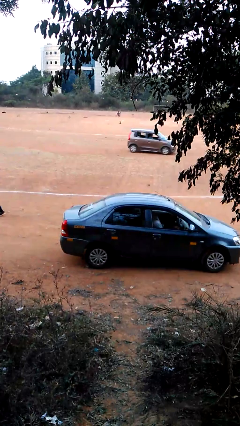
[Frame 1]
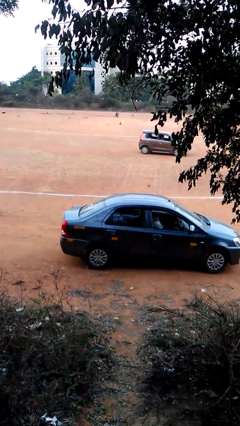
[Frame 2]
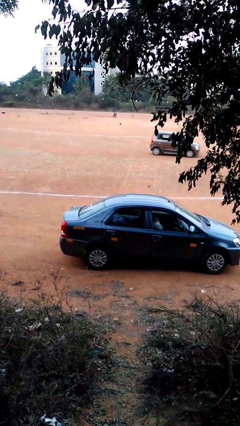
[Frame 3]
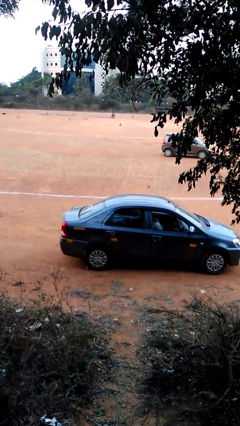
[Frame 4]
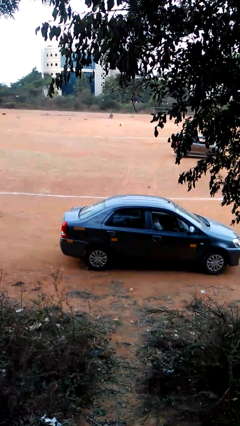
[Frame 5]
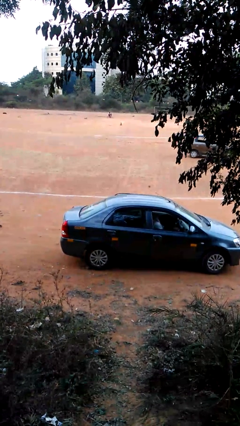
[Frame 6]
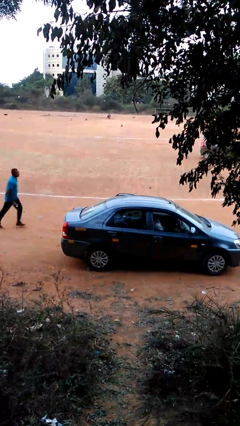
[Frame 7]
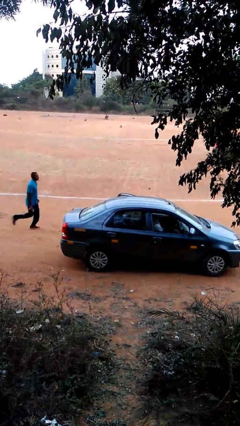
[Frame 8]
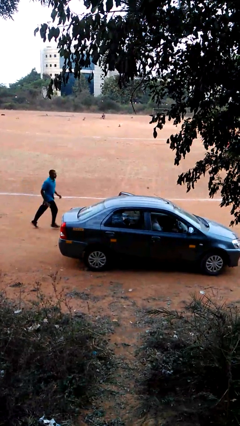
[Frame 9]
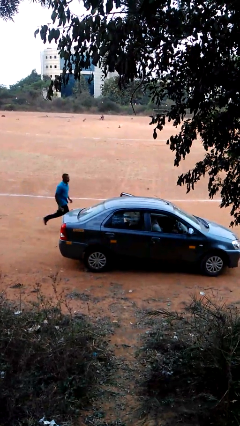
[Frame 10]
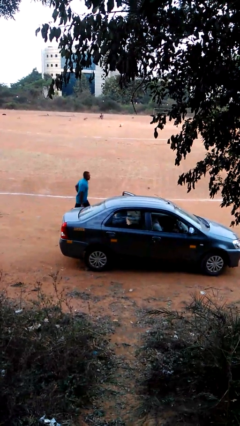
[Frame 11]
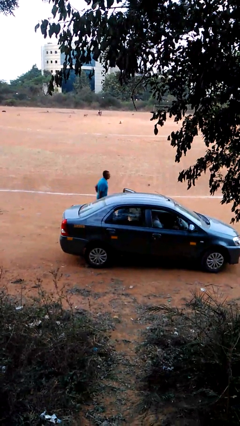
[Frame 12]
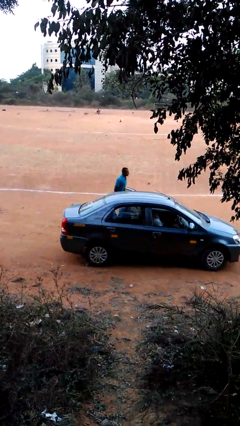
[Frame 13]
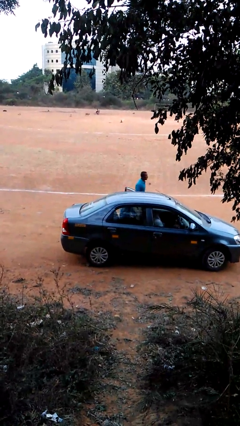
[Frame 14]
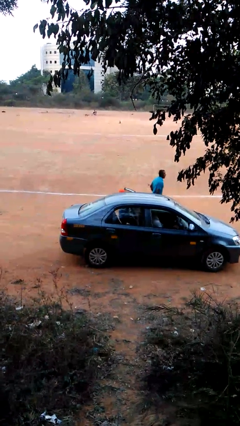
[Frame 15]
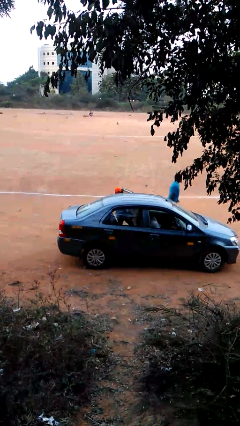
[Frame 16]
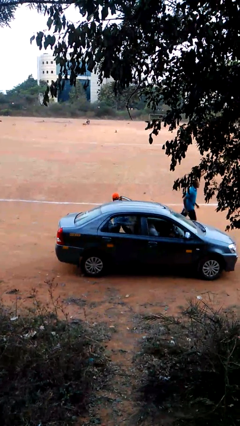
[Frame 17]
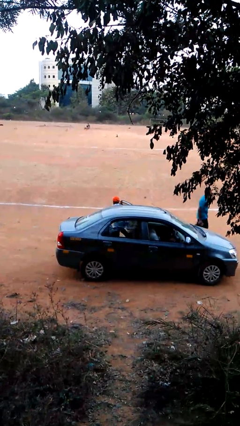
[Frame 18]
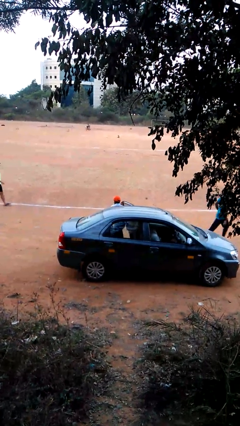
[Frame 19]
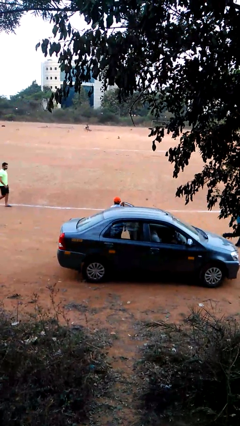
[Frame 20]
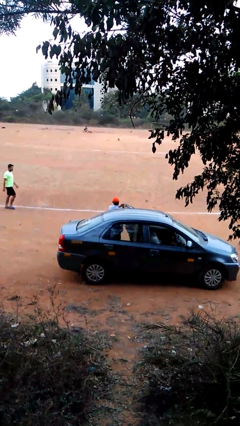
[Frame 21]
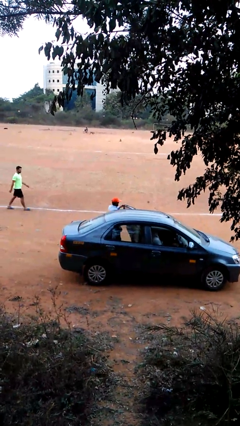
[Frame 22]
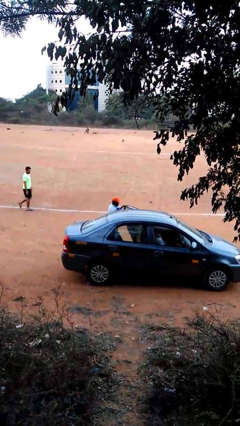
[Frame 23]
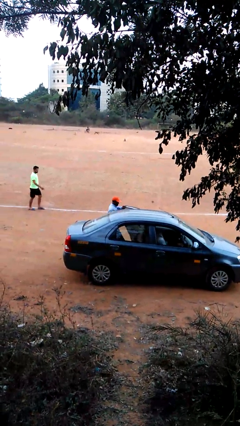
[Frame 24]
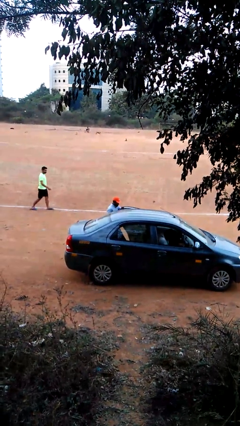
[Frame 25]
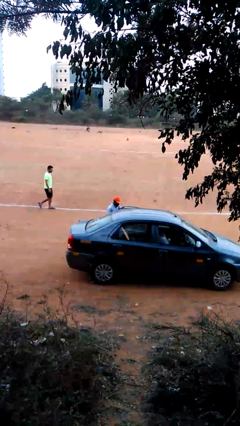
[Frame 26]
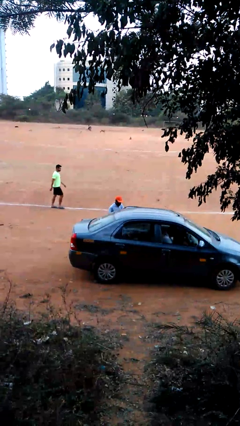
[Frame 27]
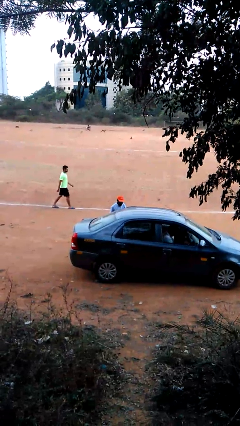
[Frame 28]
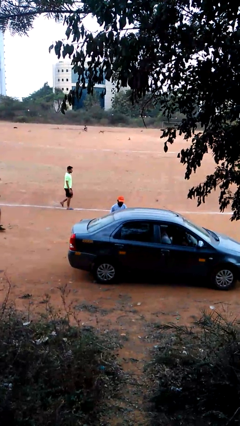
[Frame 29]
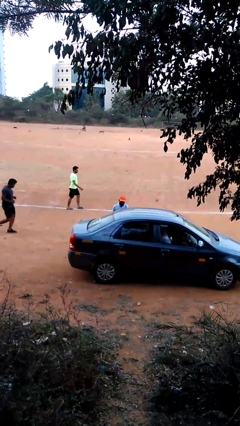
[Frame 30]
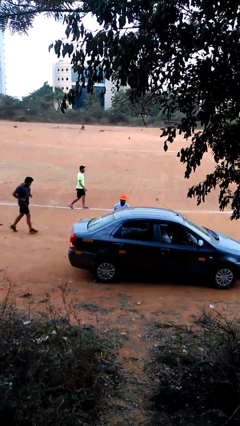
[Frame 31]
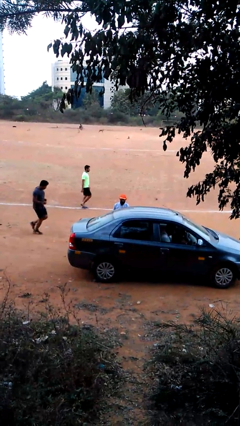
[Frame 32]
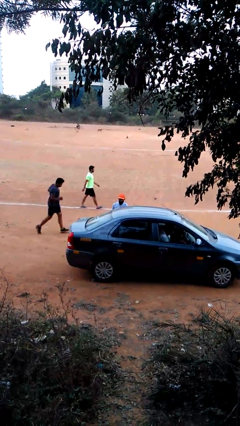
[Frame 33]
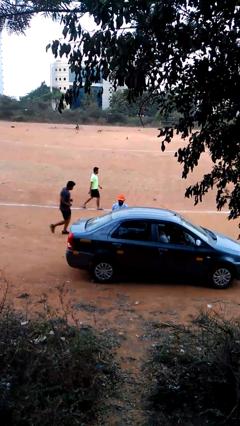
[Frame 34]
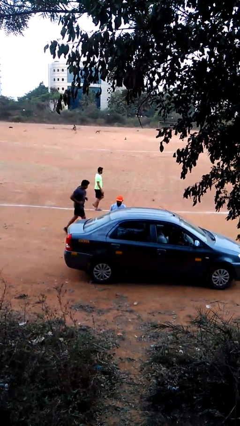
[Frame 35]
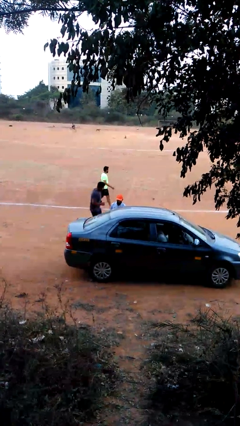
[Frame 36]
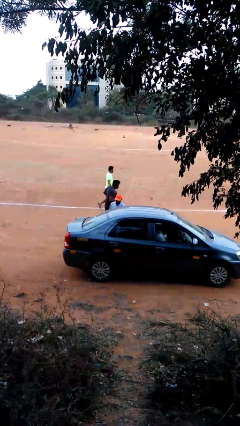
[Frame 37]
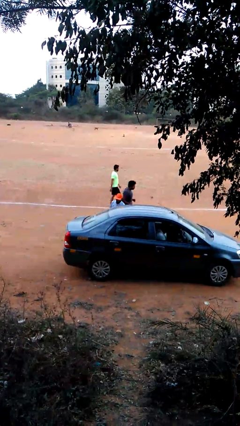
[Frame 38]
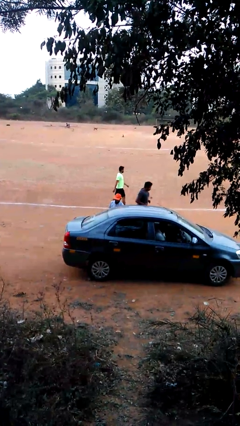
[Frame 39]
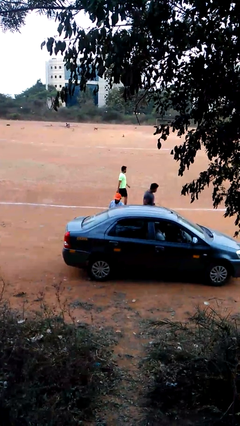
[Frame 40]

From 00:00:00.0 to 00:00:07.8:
person exits car

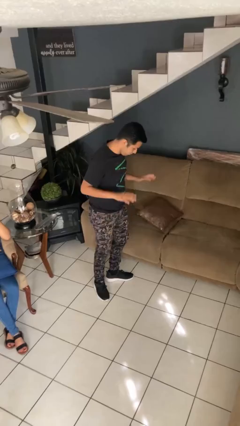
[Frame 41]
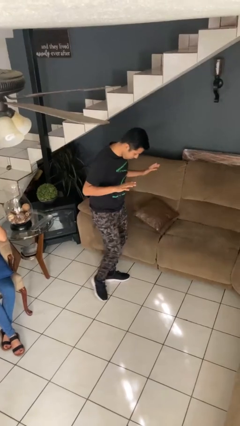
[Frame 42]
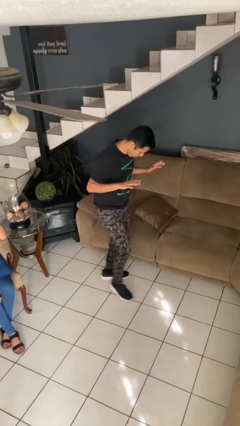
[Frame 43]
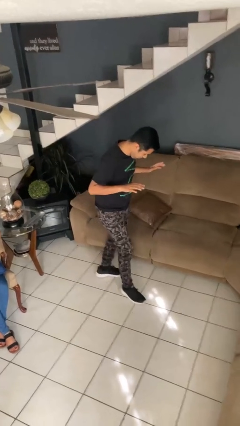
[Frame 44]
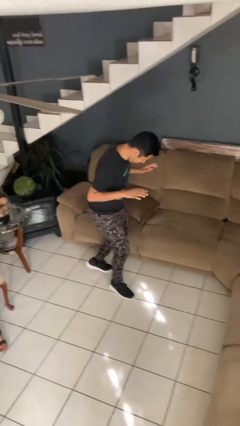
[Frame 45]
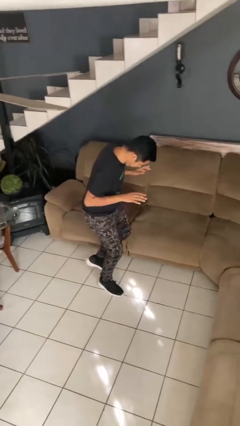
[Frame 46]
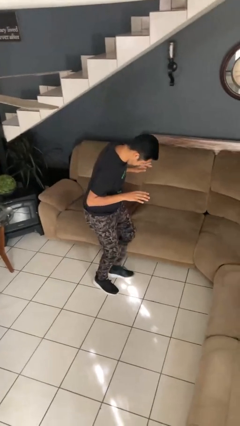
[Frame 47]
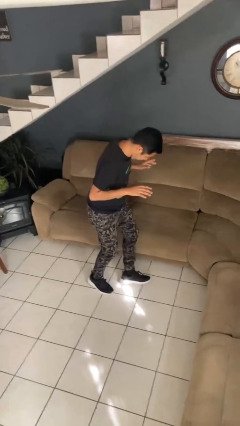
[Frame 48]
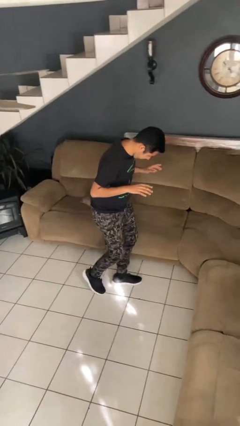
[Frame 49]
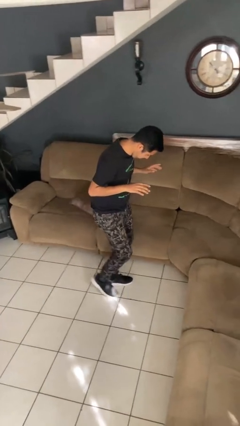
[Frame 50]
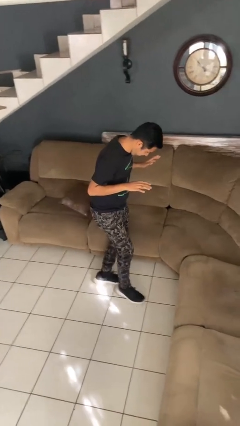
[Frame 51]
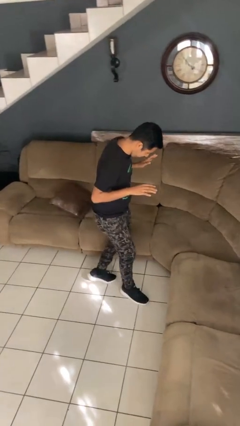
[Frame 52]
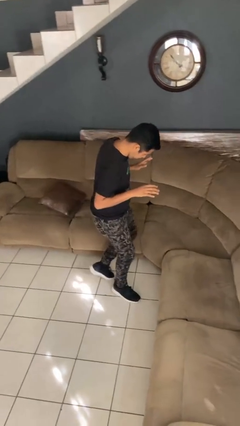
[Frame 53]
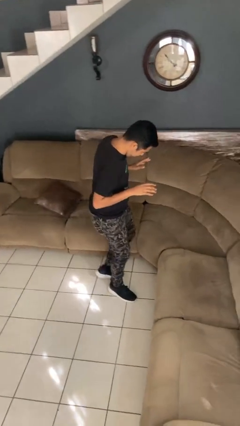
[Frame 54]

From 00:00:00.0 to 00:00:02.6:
person walks tiptoe

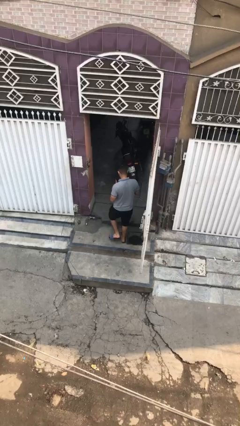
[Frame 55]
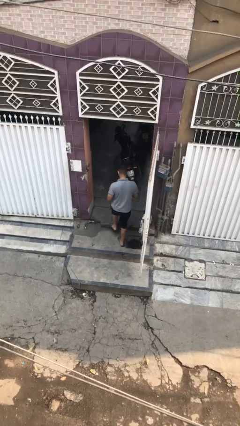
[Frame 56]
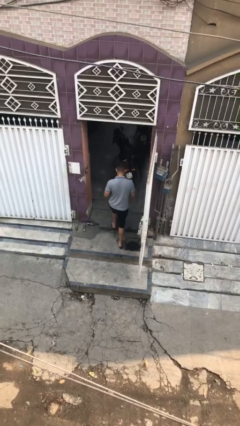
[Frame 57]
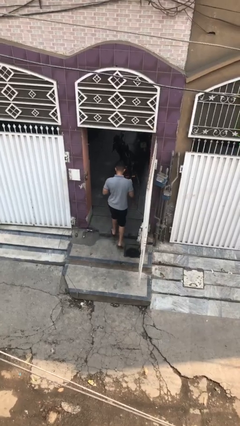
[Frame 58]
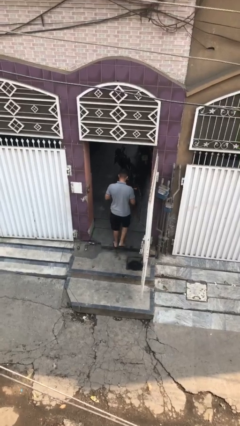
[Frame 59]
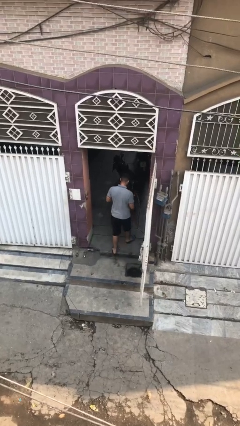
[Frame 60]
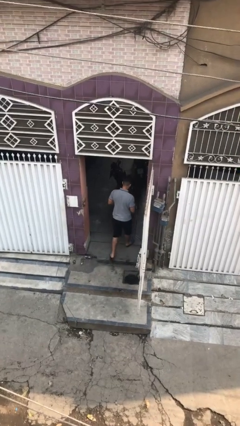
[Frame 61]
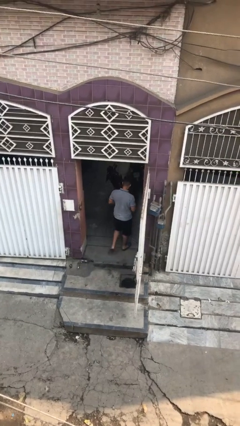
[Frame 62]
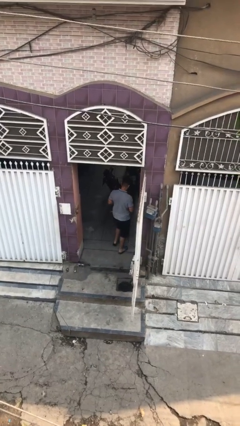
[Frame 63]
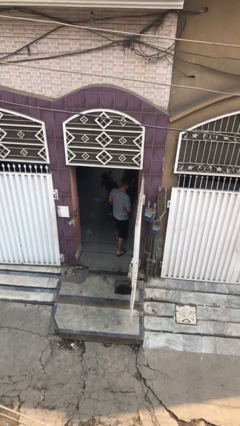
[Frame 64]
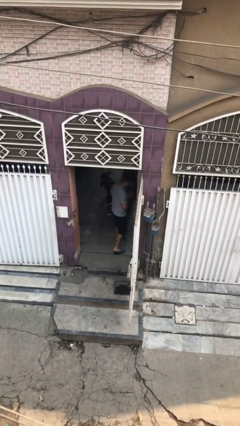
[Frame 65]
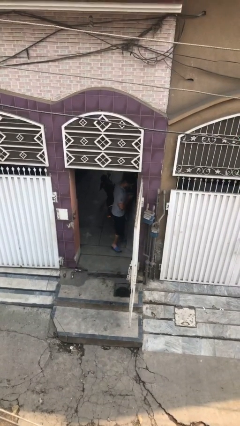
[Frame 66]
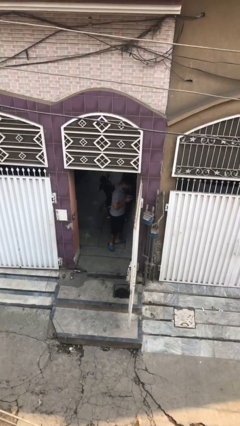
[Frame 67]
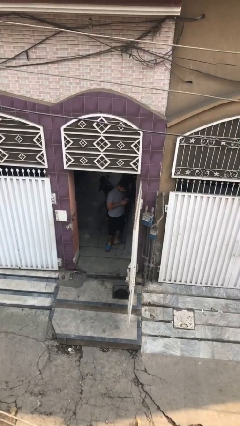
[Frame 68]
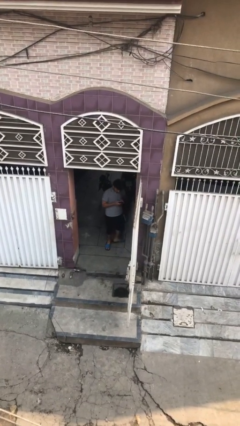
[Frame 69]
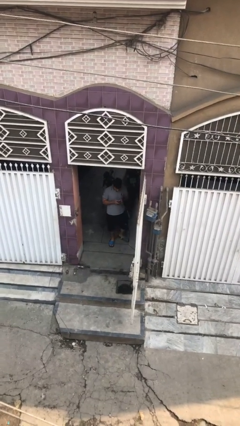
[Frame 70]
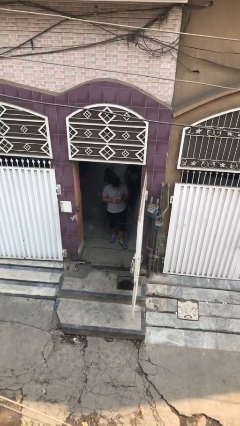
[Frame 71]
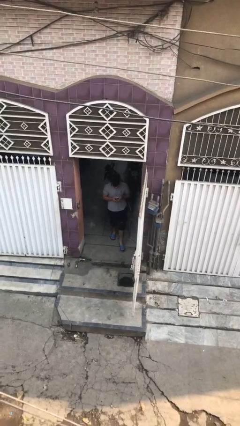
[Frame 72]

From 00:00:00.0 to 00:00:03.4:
person exits scene through structure

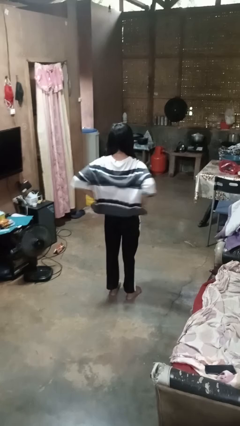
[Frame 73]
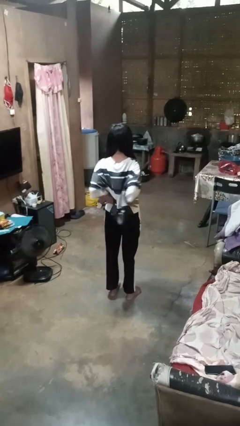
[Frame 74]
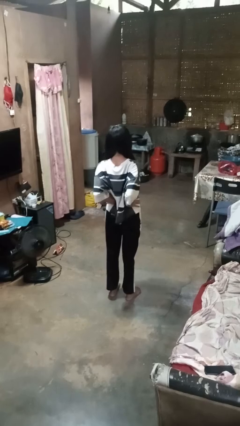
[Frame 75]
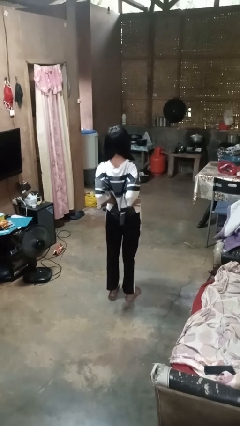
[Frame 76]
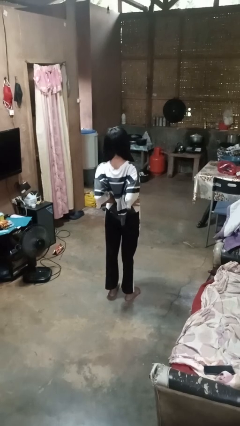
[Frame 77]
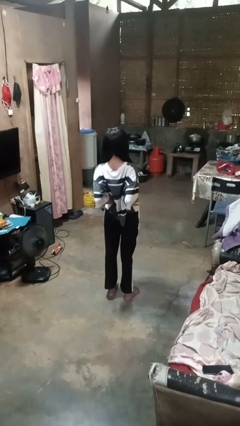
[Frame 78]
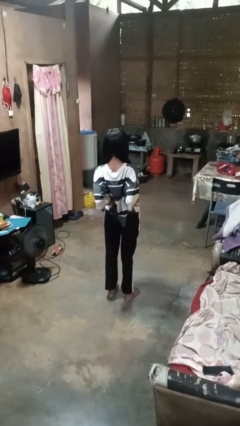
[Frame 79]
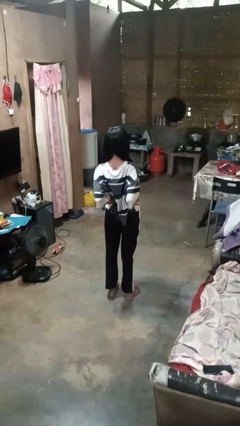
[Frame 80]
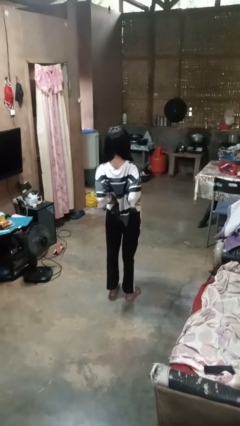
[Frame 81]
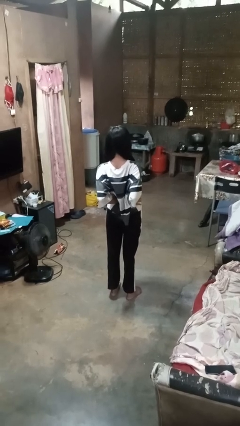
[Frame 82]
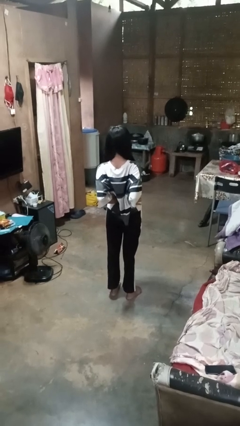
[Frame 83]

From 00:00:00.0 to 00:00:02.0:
person stretches back

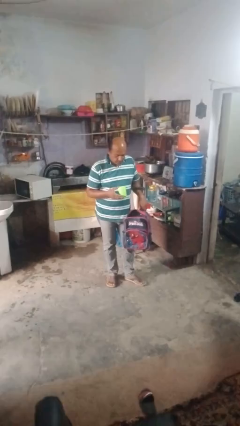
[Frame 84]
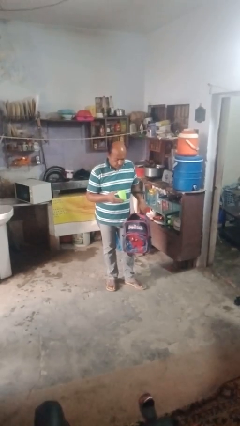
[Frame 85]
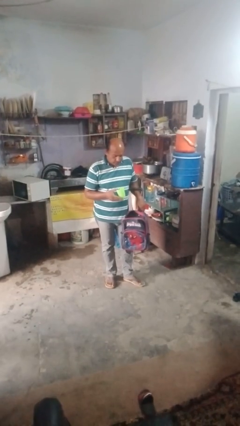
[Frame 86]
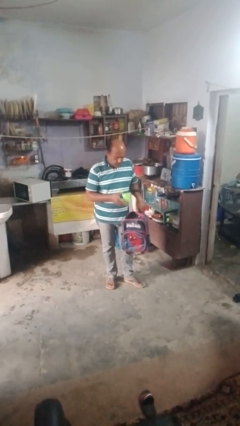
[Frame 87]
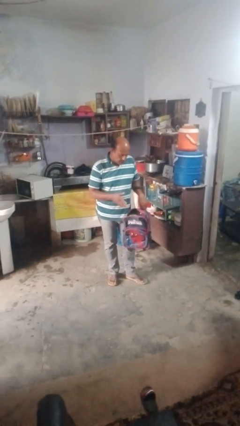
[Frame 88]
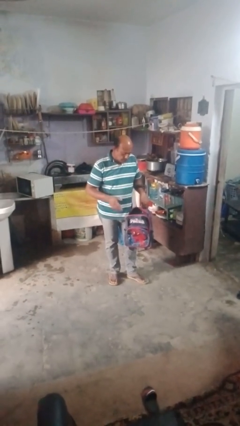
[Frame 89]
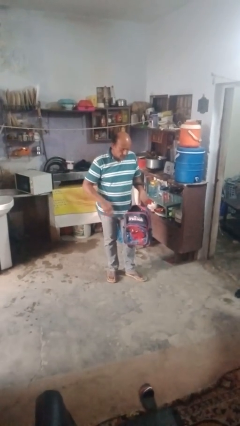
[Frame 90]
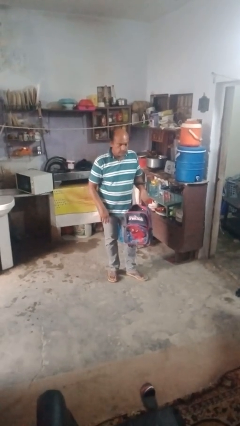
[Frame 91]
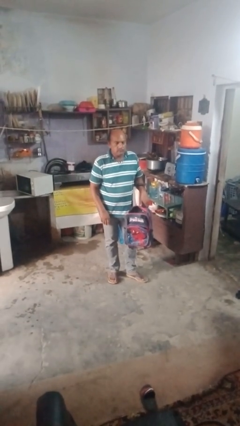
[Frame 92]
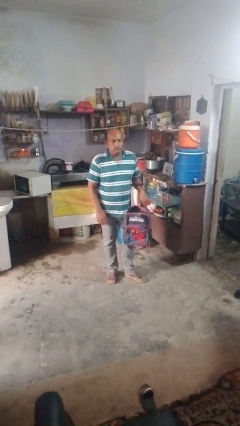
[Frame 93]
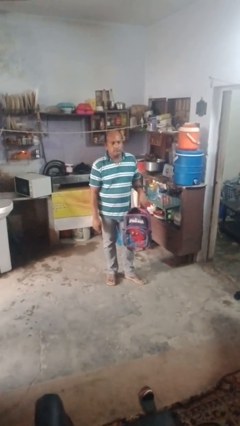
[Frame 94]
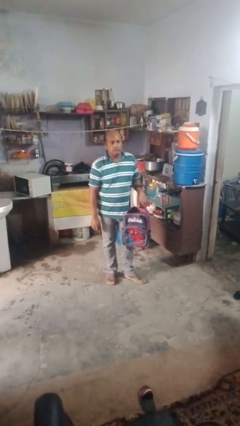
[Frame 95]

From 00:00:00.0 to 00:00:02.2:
person puts object into bag
